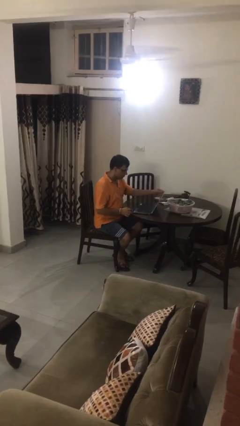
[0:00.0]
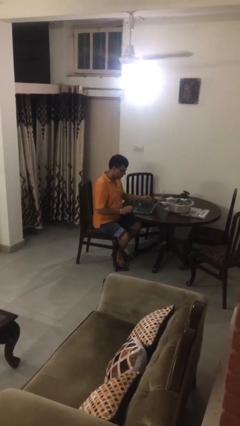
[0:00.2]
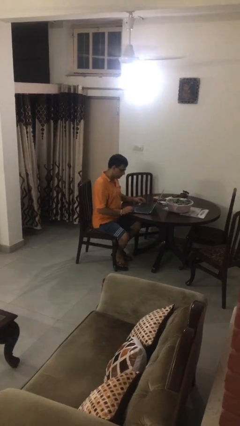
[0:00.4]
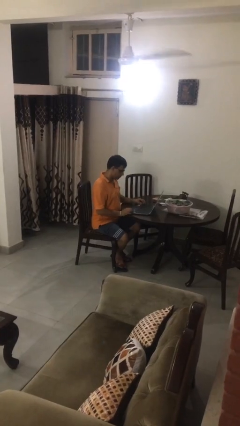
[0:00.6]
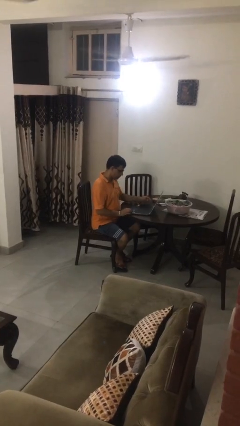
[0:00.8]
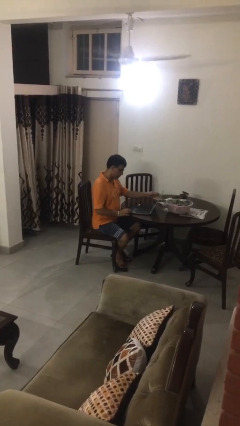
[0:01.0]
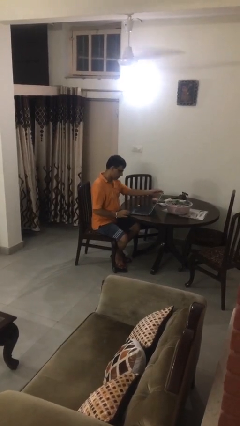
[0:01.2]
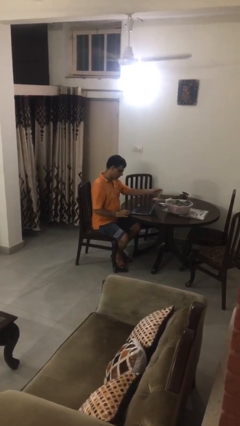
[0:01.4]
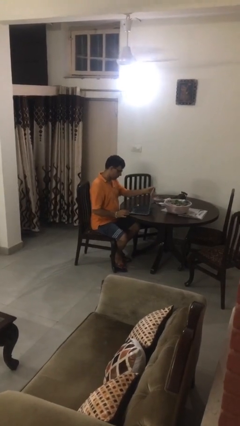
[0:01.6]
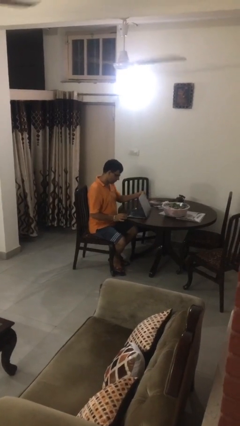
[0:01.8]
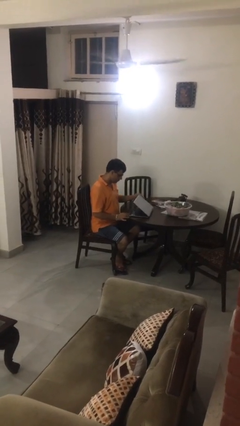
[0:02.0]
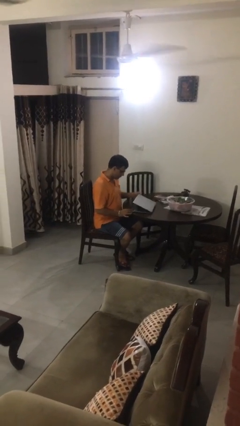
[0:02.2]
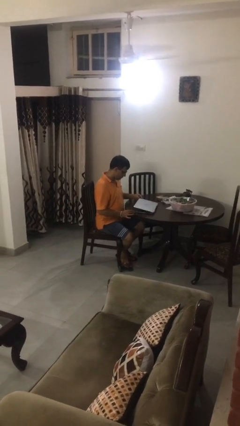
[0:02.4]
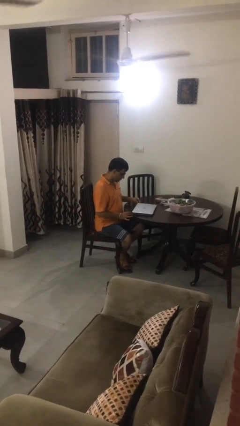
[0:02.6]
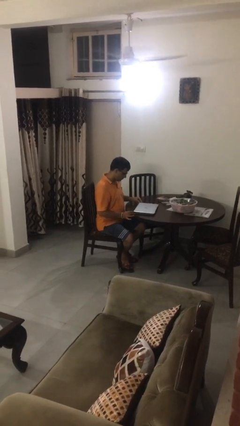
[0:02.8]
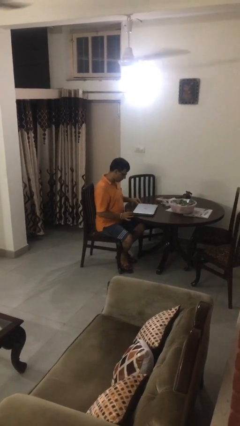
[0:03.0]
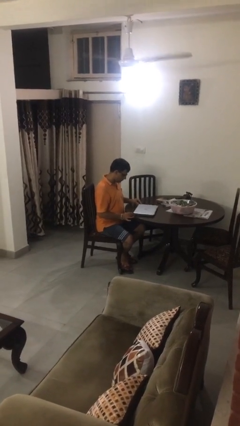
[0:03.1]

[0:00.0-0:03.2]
person closes laptop

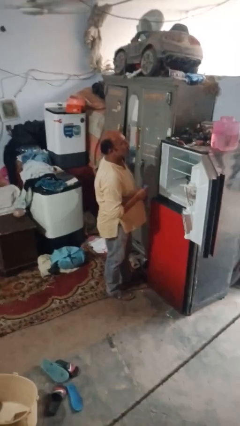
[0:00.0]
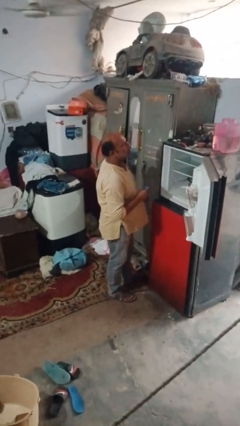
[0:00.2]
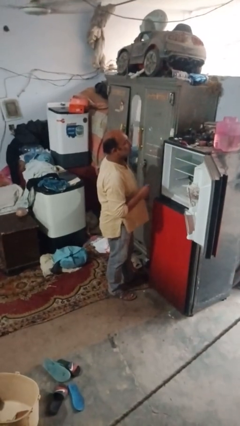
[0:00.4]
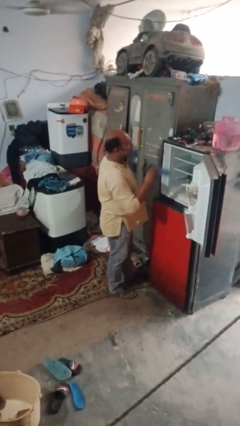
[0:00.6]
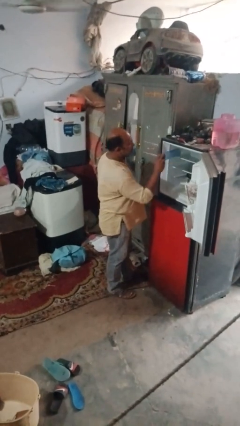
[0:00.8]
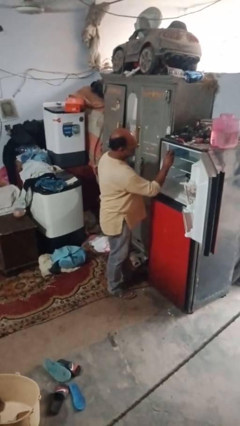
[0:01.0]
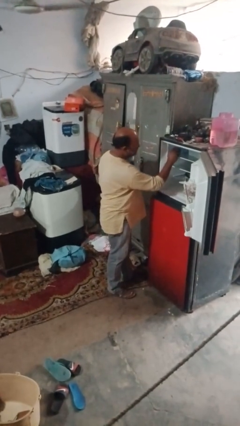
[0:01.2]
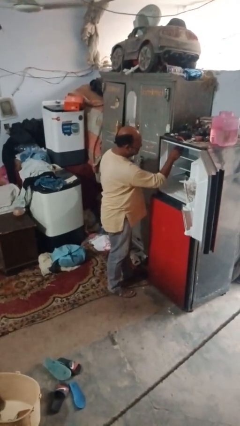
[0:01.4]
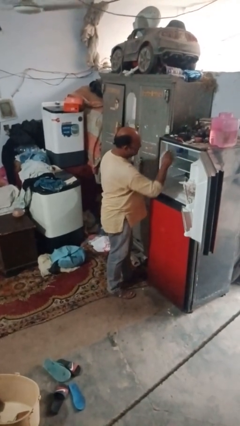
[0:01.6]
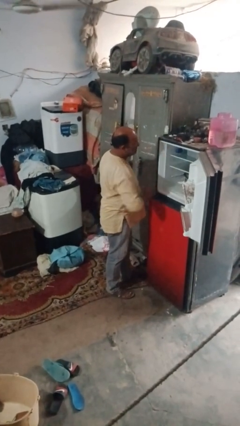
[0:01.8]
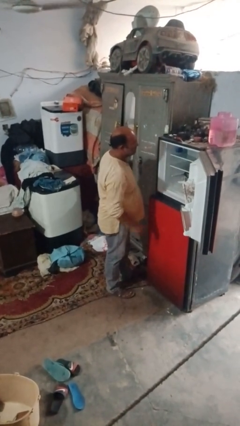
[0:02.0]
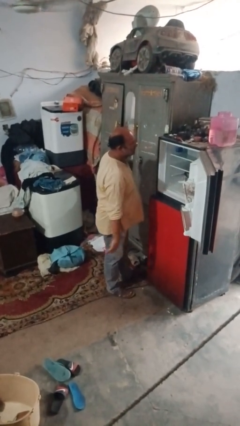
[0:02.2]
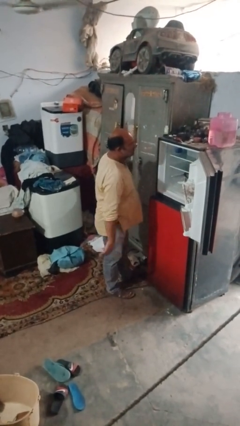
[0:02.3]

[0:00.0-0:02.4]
person puts object into refrigerator

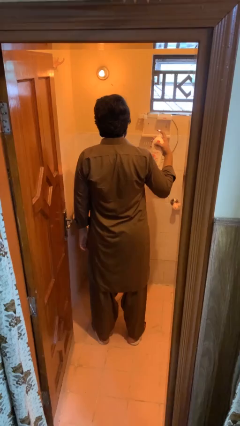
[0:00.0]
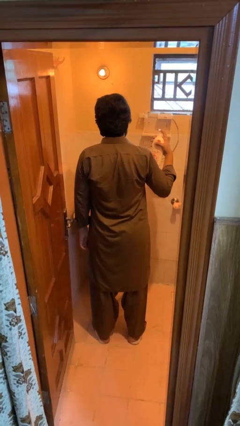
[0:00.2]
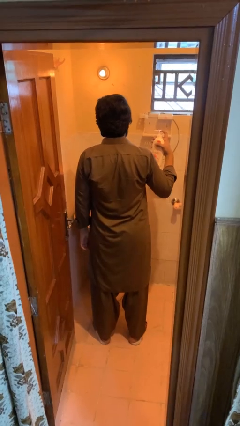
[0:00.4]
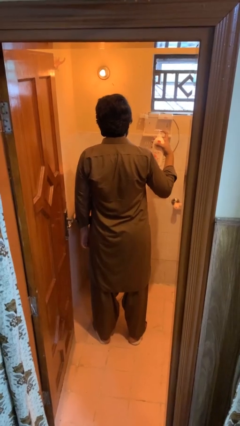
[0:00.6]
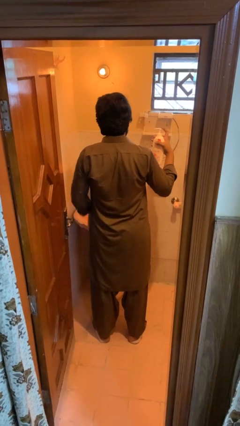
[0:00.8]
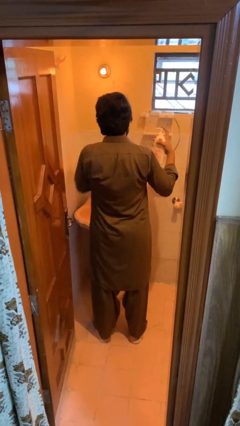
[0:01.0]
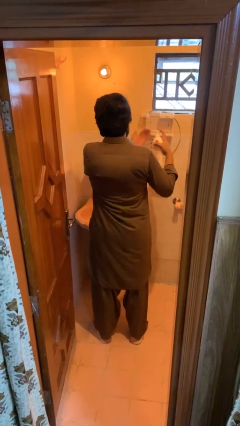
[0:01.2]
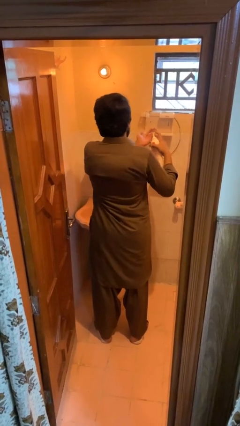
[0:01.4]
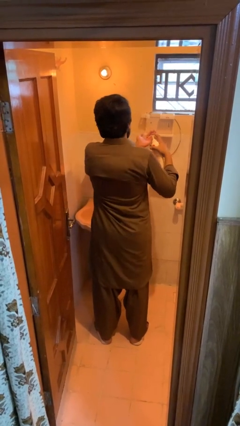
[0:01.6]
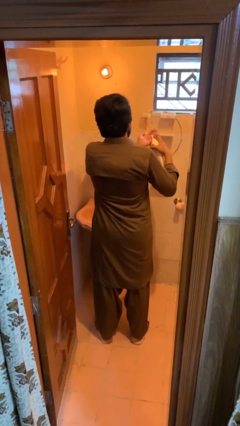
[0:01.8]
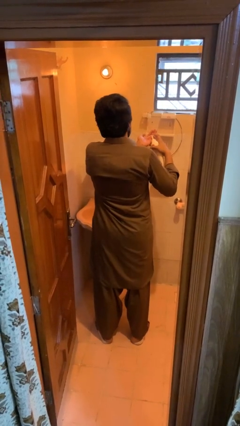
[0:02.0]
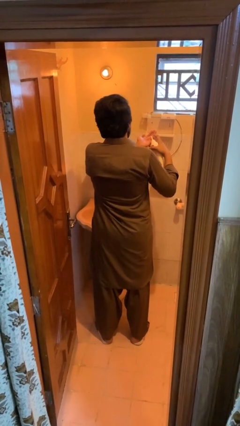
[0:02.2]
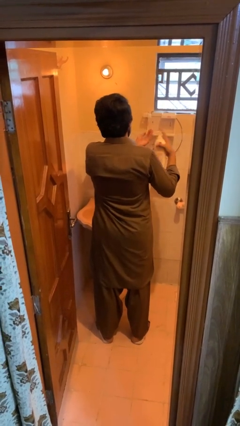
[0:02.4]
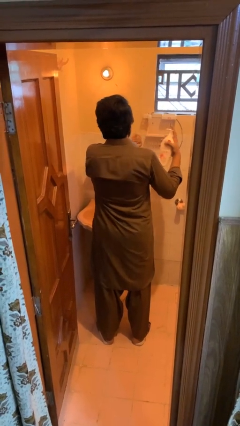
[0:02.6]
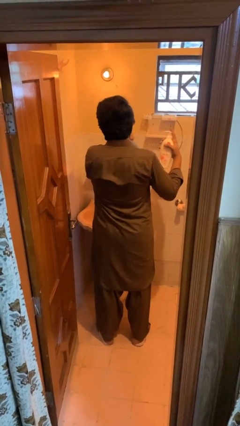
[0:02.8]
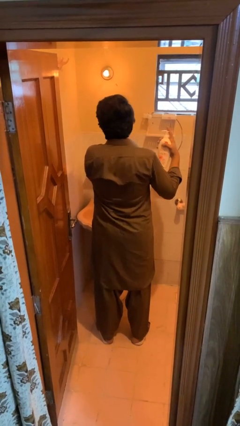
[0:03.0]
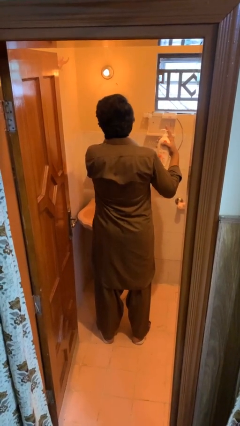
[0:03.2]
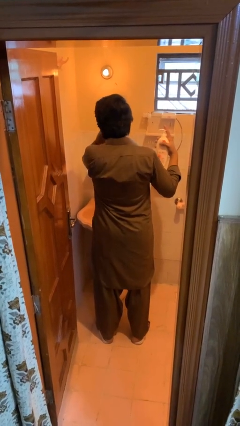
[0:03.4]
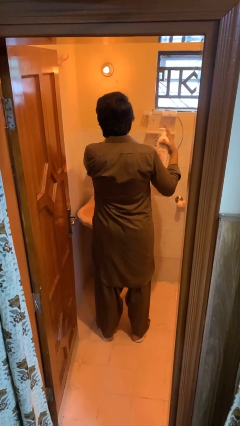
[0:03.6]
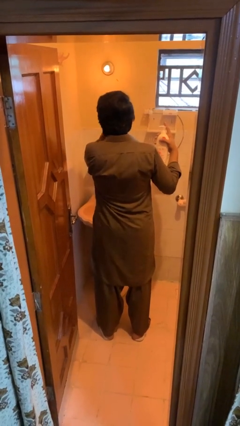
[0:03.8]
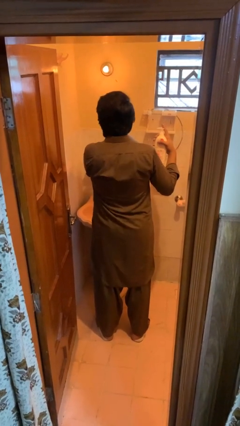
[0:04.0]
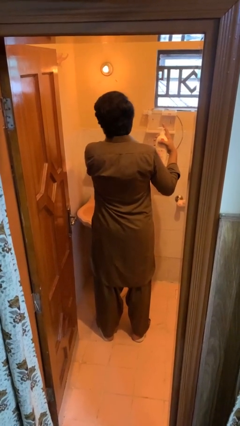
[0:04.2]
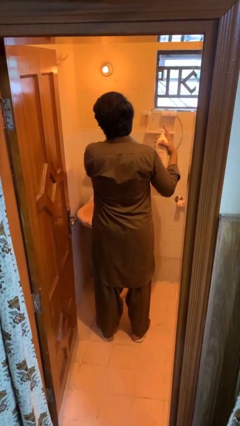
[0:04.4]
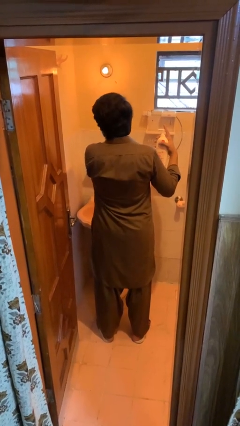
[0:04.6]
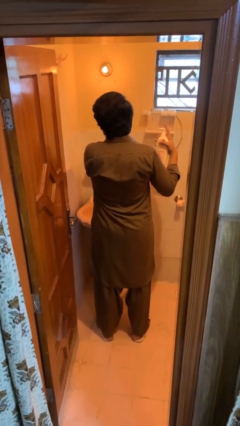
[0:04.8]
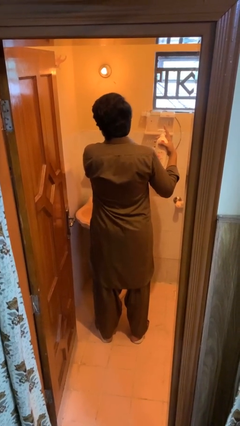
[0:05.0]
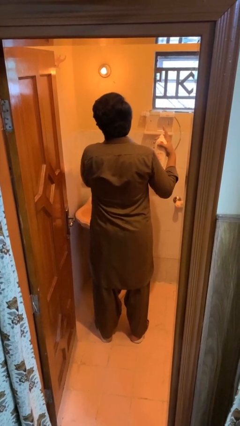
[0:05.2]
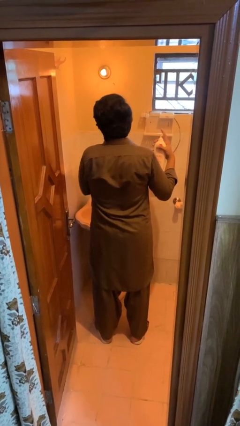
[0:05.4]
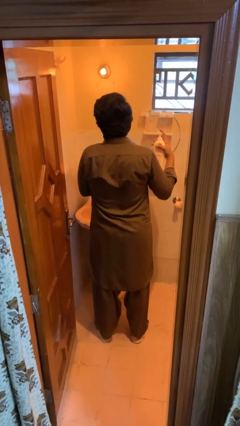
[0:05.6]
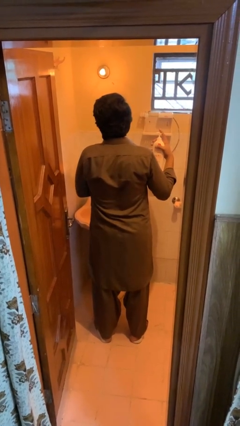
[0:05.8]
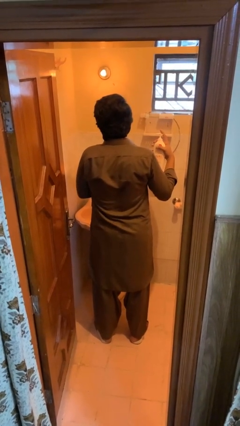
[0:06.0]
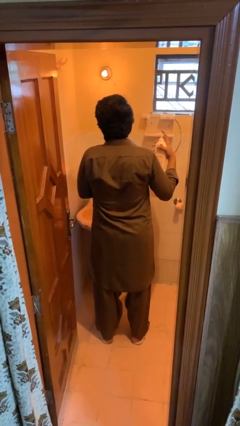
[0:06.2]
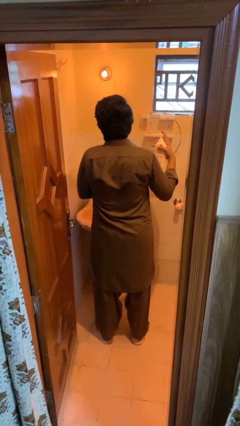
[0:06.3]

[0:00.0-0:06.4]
person applies sunscreen

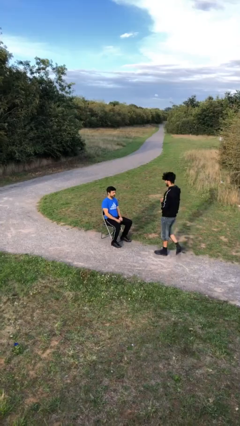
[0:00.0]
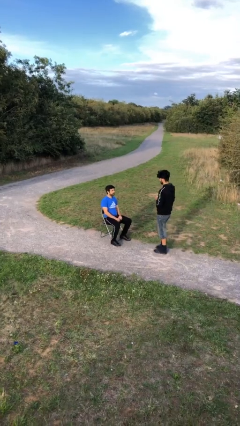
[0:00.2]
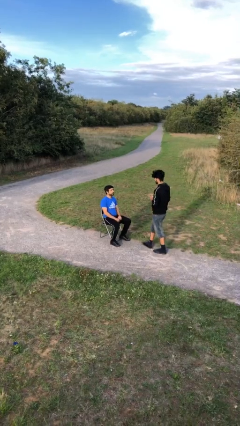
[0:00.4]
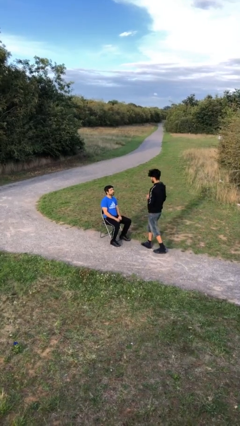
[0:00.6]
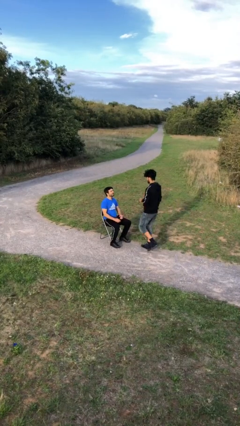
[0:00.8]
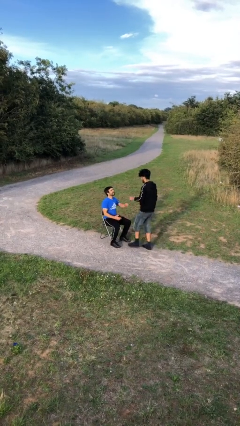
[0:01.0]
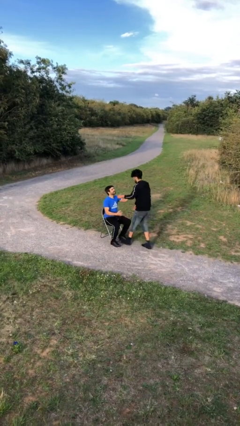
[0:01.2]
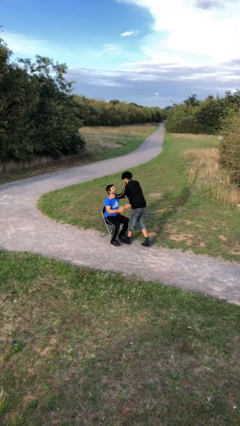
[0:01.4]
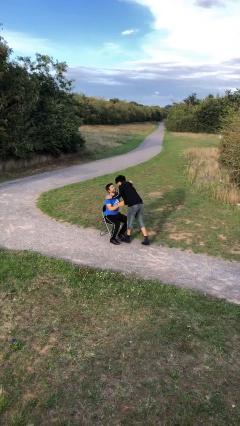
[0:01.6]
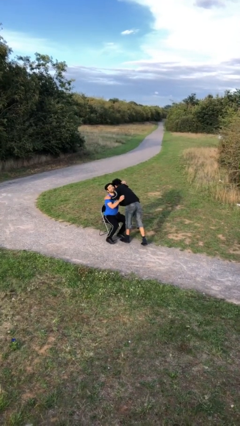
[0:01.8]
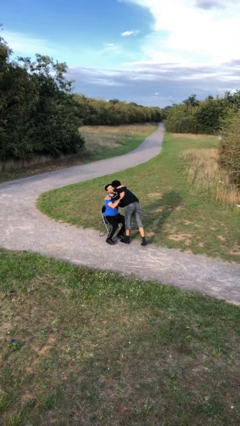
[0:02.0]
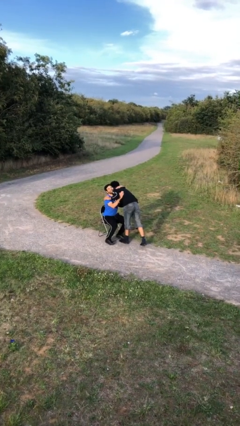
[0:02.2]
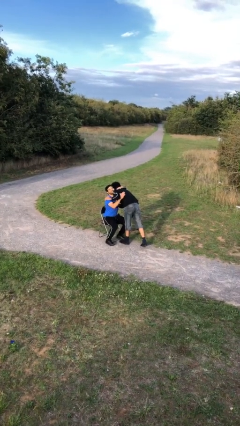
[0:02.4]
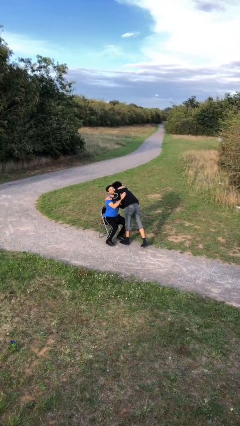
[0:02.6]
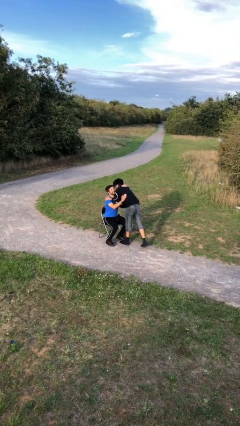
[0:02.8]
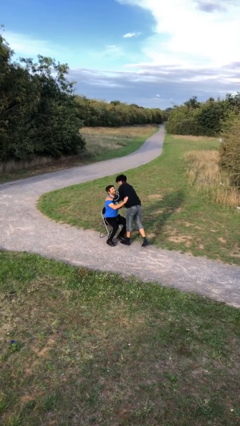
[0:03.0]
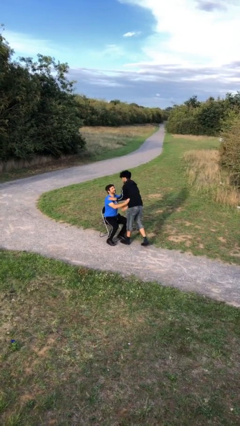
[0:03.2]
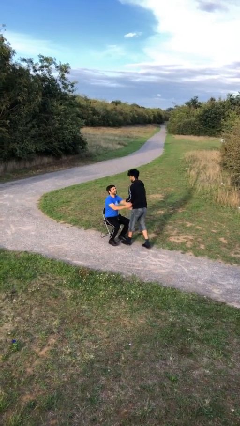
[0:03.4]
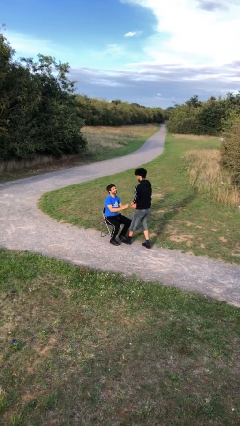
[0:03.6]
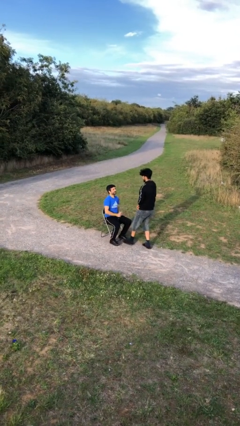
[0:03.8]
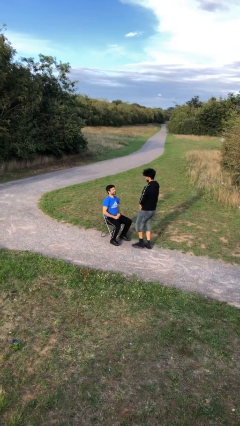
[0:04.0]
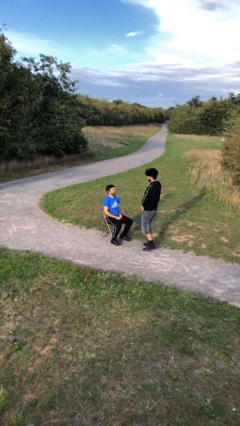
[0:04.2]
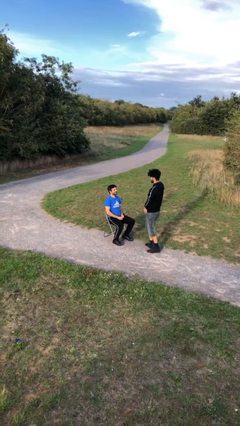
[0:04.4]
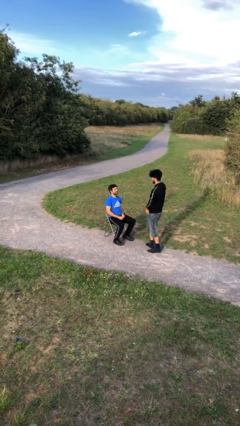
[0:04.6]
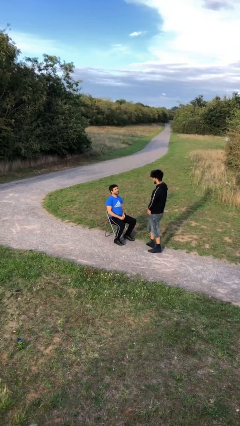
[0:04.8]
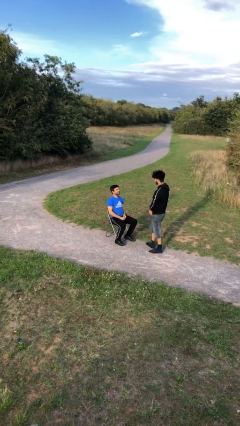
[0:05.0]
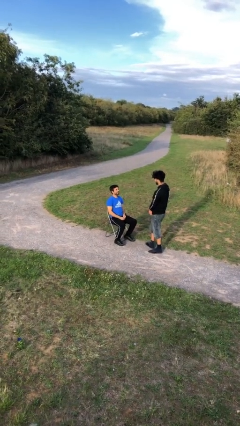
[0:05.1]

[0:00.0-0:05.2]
person embraces person

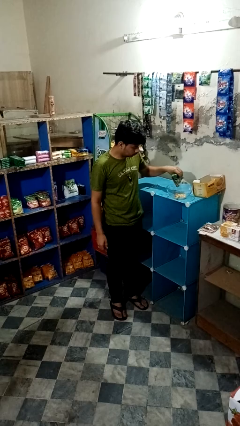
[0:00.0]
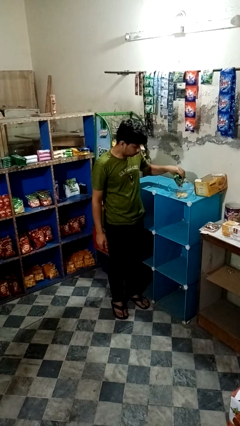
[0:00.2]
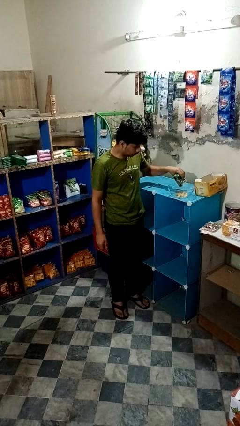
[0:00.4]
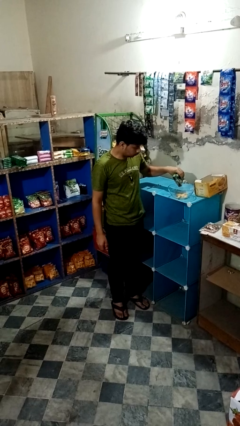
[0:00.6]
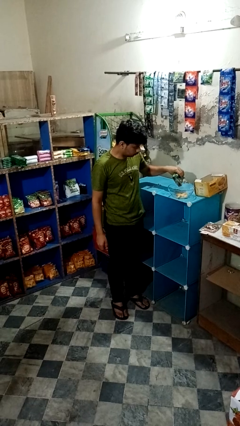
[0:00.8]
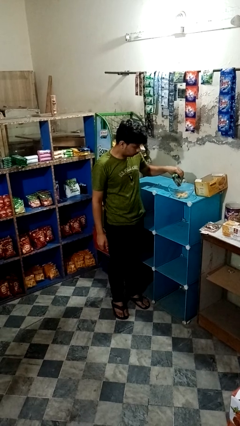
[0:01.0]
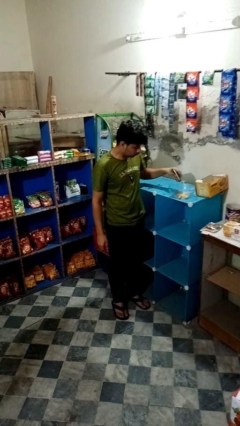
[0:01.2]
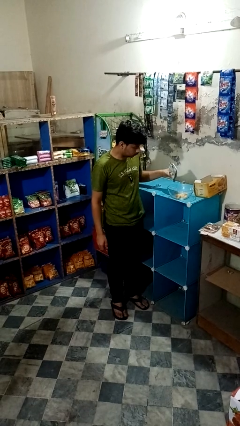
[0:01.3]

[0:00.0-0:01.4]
person pours into bowl
